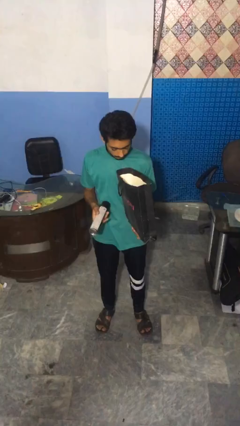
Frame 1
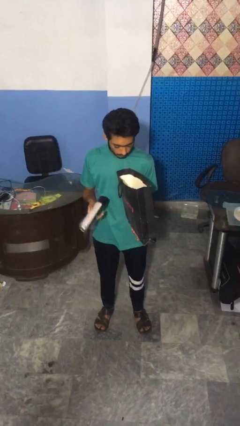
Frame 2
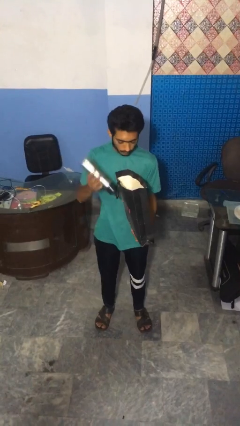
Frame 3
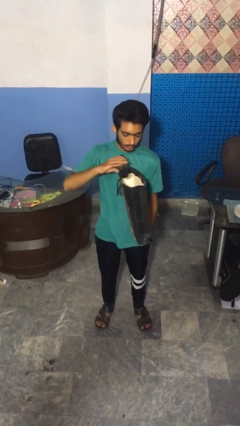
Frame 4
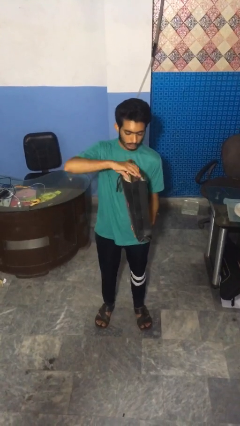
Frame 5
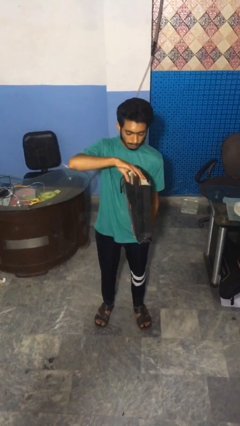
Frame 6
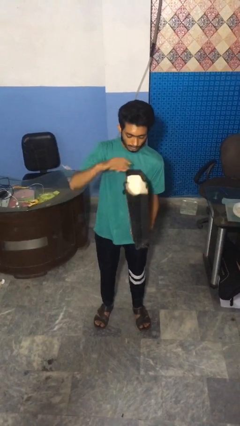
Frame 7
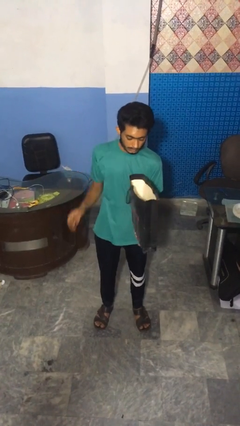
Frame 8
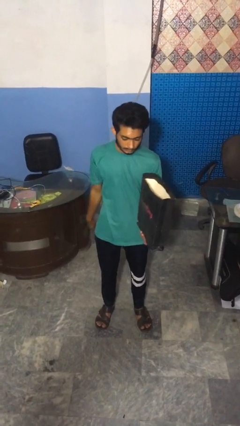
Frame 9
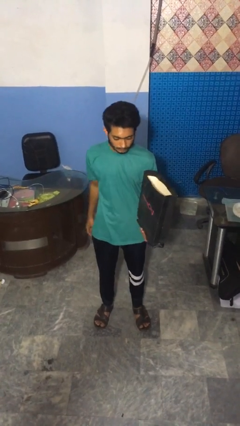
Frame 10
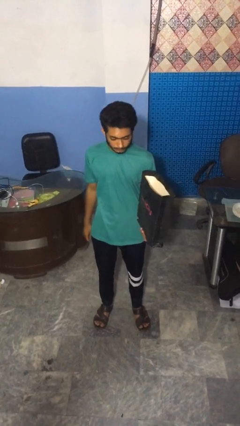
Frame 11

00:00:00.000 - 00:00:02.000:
person puts object into bag

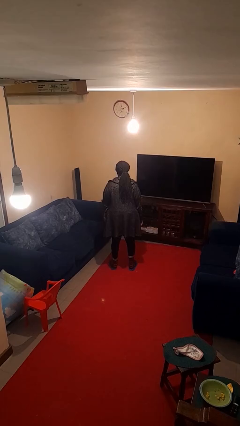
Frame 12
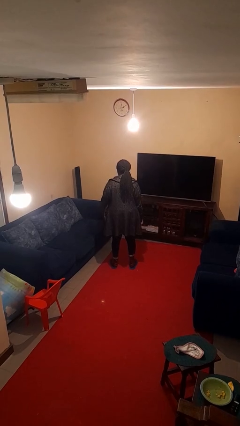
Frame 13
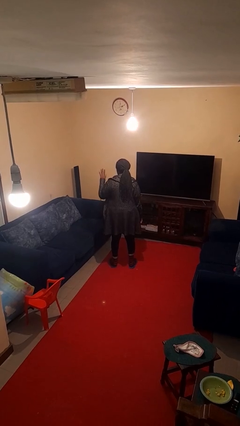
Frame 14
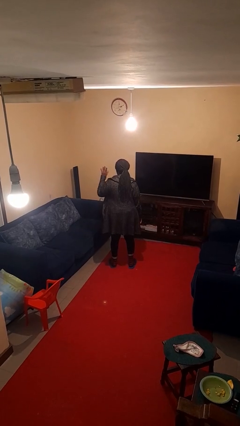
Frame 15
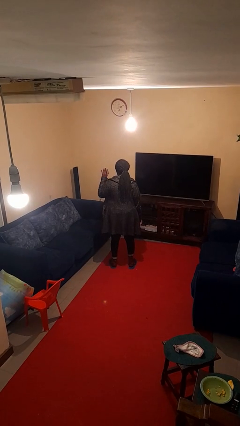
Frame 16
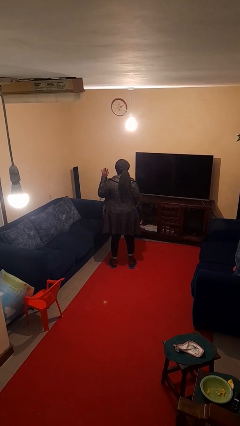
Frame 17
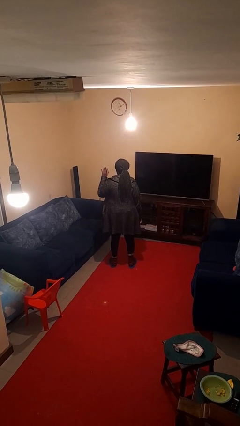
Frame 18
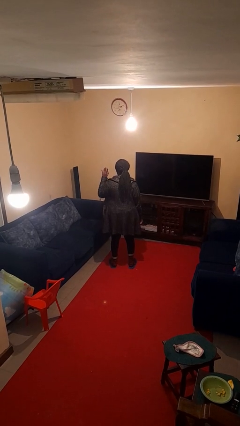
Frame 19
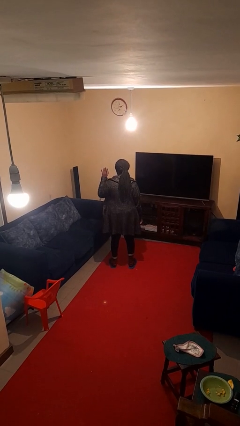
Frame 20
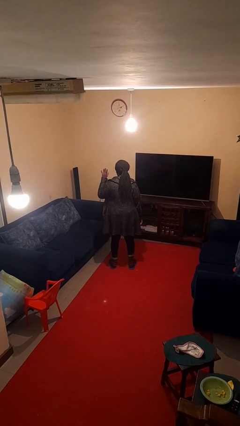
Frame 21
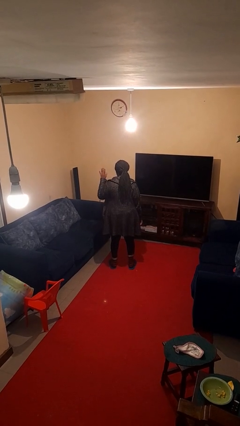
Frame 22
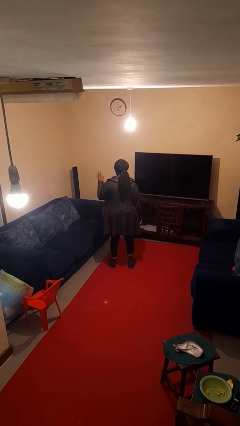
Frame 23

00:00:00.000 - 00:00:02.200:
person gestures number five

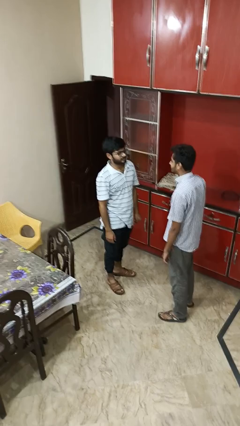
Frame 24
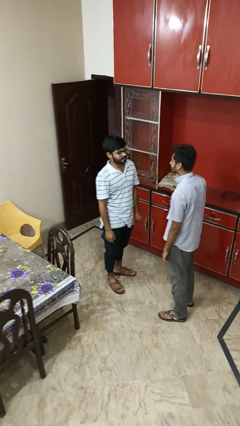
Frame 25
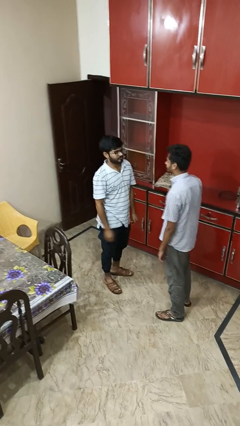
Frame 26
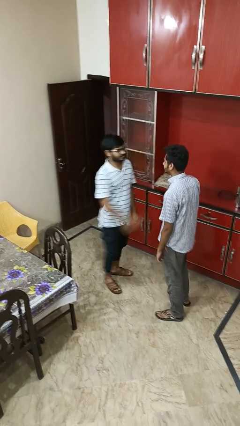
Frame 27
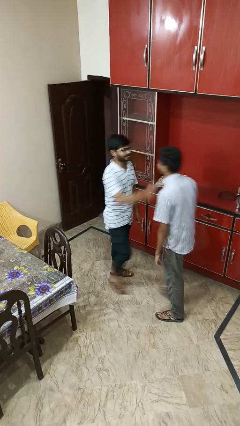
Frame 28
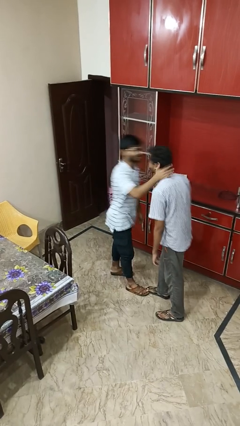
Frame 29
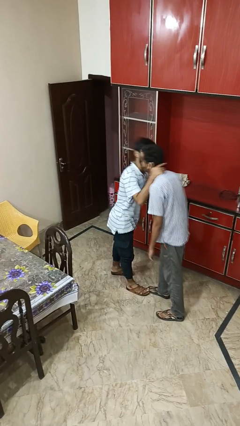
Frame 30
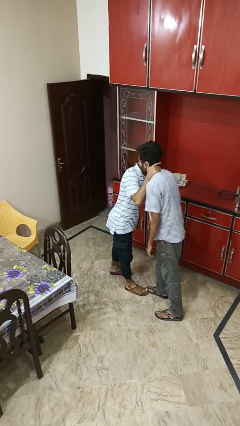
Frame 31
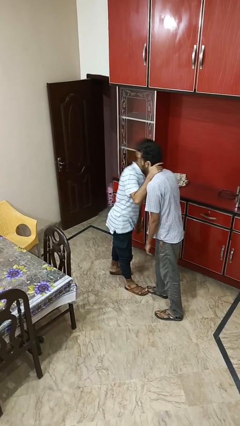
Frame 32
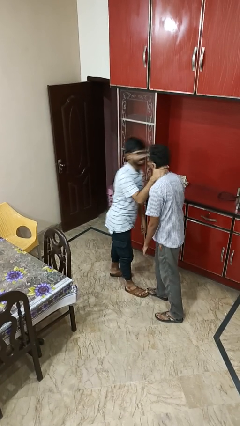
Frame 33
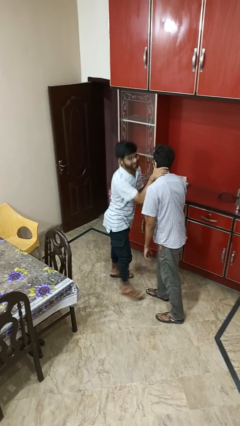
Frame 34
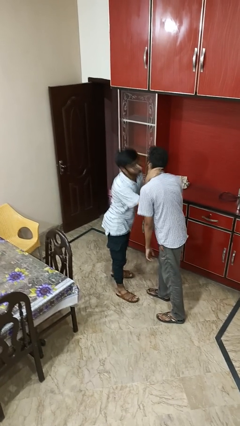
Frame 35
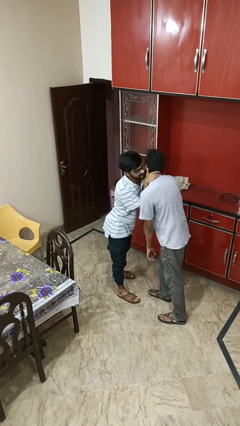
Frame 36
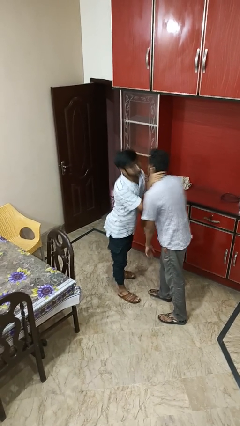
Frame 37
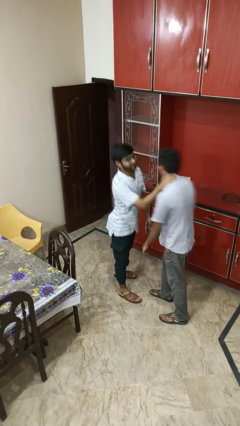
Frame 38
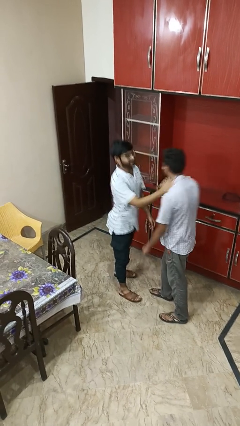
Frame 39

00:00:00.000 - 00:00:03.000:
person kisses cheek of person

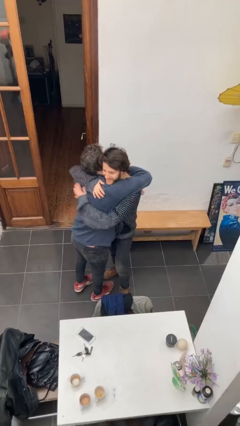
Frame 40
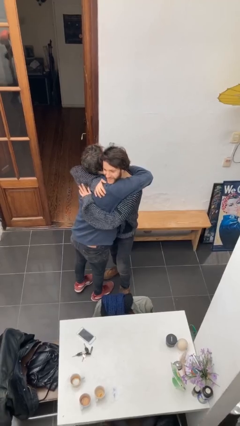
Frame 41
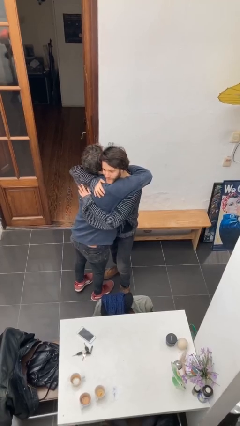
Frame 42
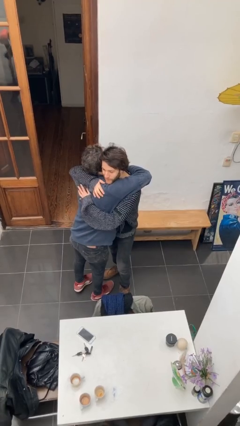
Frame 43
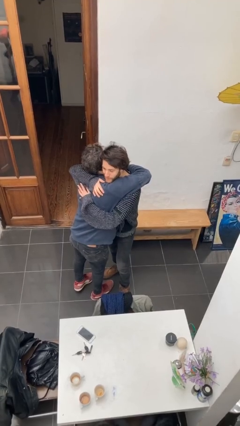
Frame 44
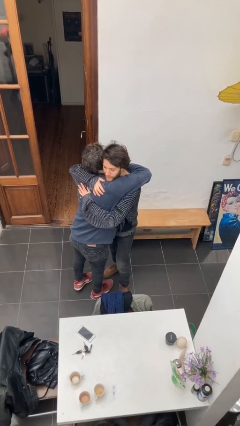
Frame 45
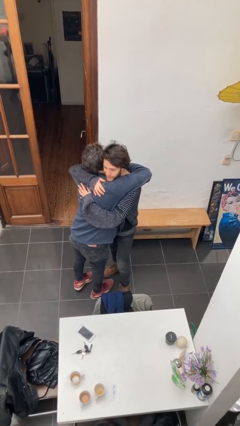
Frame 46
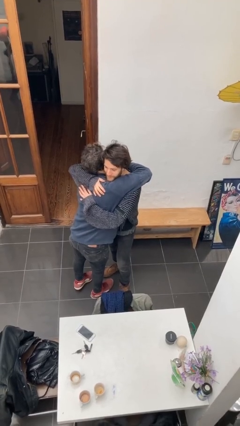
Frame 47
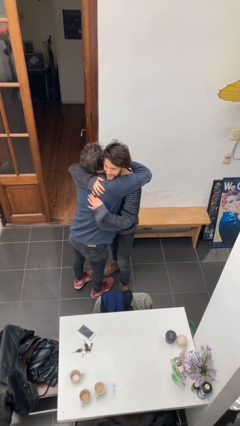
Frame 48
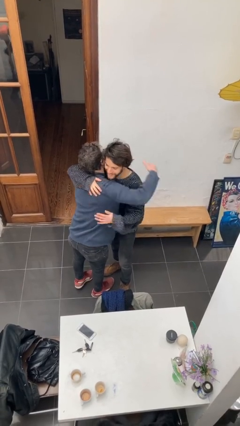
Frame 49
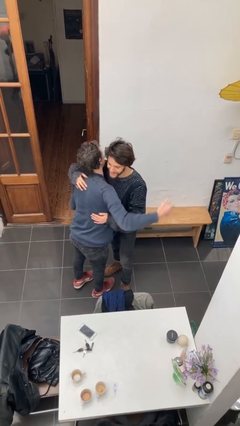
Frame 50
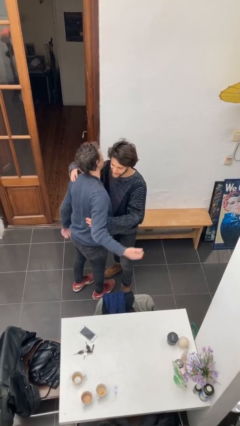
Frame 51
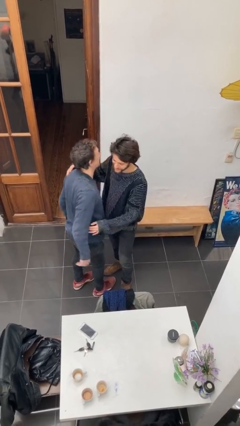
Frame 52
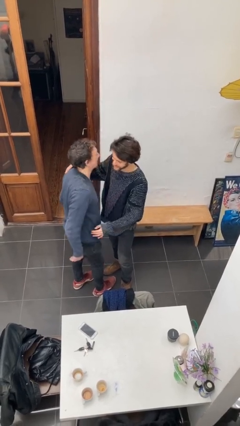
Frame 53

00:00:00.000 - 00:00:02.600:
person embraces person

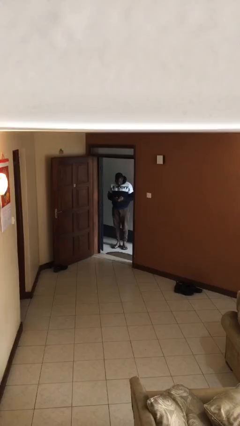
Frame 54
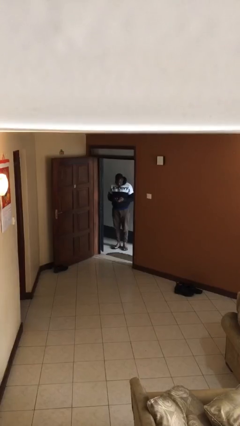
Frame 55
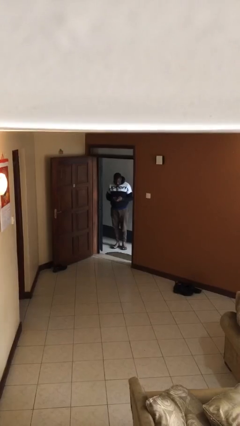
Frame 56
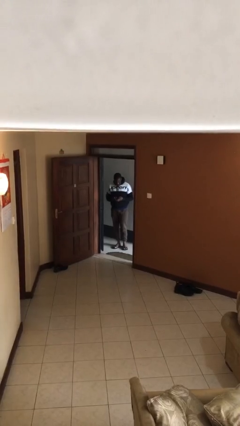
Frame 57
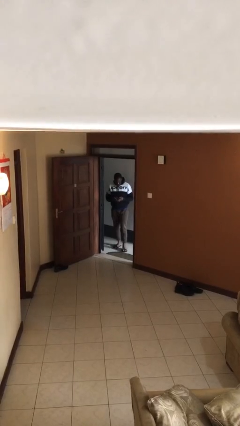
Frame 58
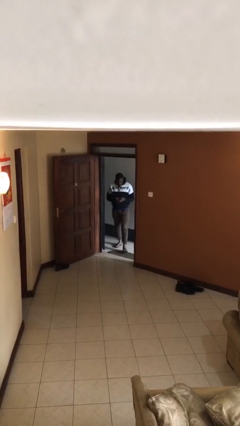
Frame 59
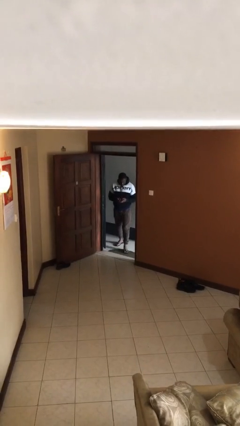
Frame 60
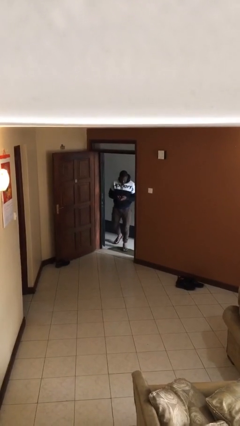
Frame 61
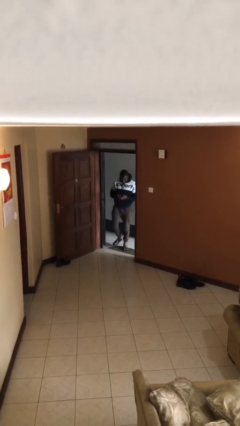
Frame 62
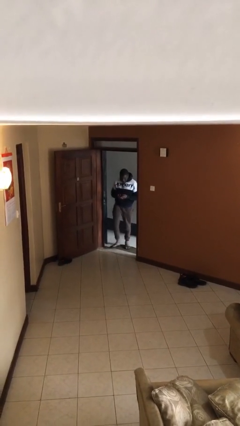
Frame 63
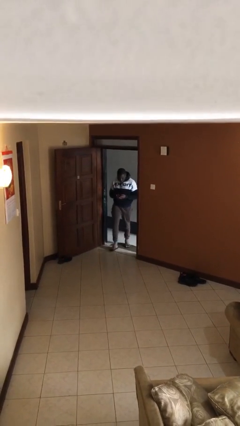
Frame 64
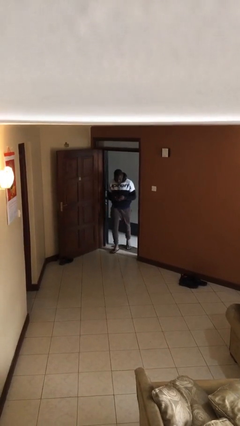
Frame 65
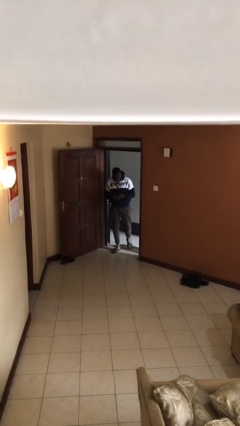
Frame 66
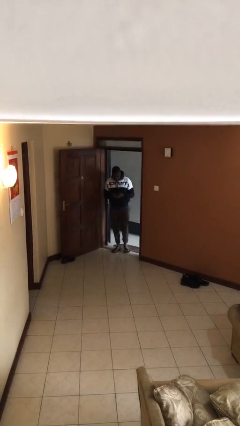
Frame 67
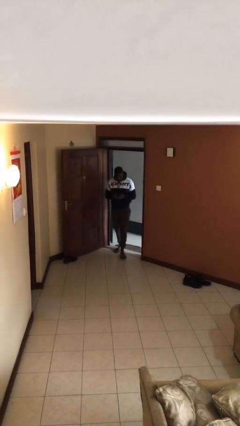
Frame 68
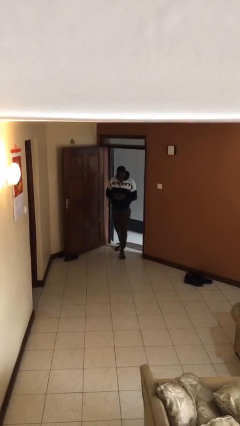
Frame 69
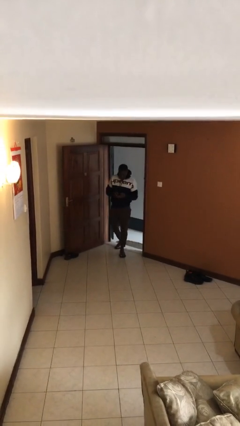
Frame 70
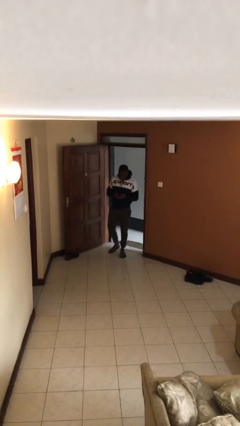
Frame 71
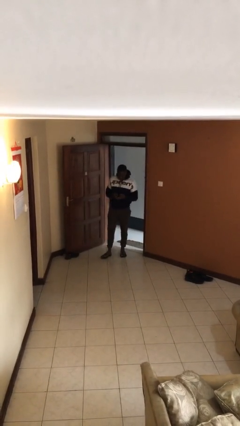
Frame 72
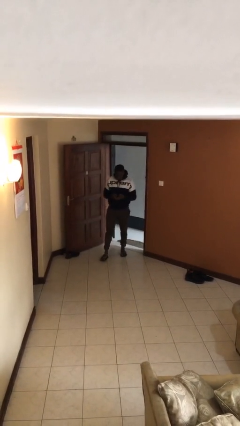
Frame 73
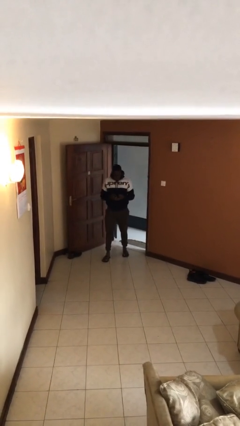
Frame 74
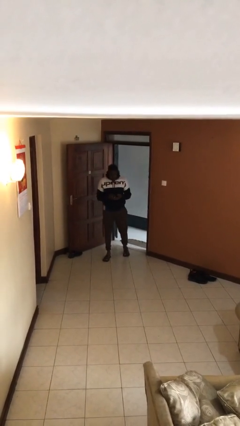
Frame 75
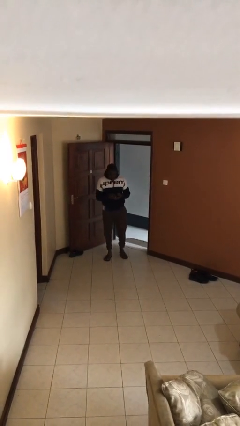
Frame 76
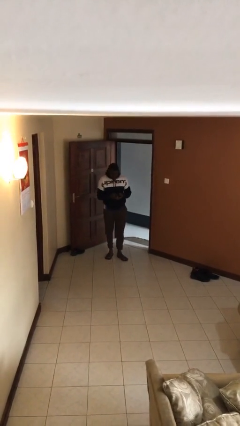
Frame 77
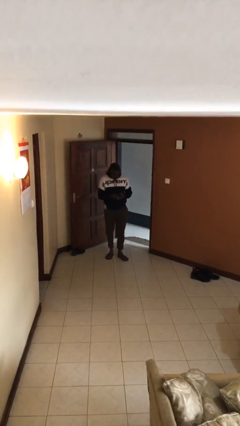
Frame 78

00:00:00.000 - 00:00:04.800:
person enters scene through structure

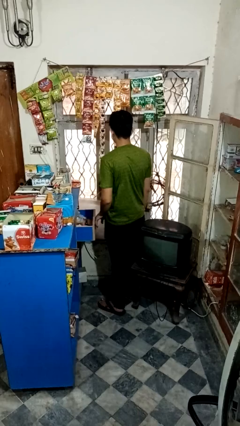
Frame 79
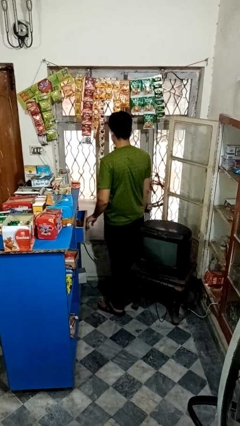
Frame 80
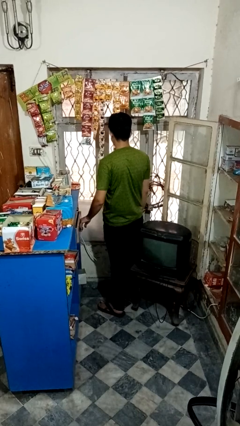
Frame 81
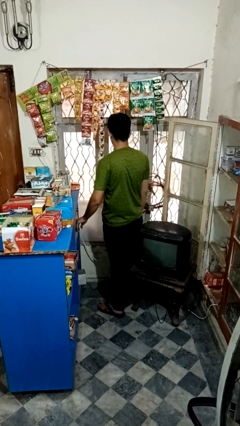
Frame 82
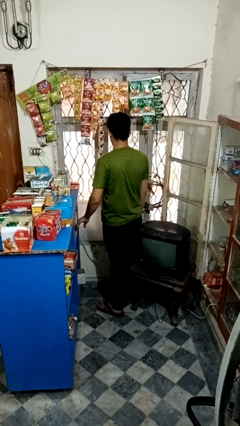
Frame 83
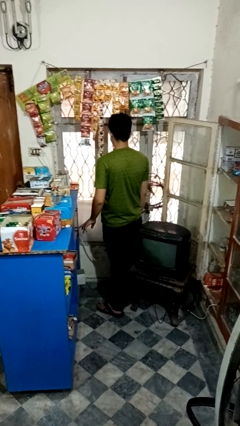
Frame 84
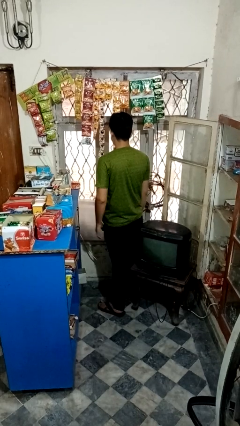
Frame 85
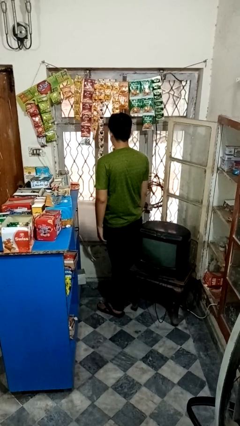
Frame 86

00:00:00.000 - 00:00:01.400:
person closes kitchen drawer

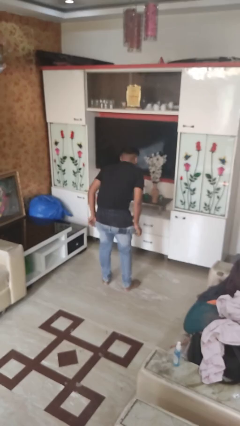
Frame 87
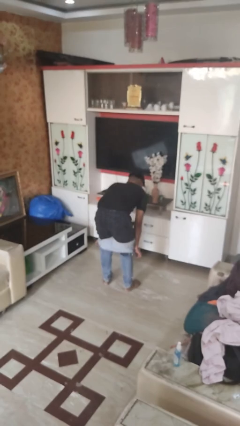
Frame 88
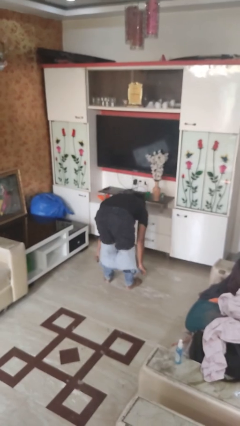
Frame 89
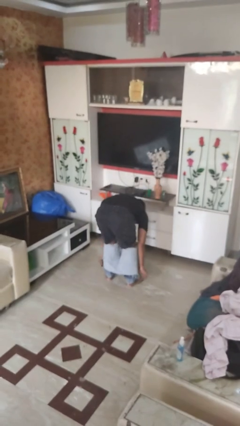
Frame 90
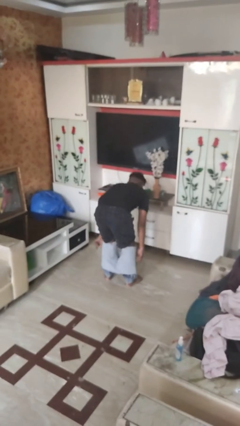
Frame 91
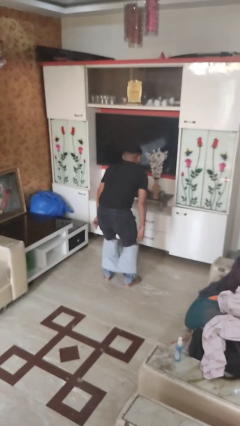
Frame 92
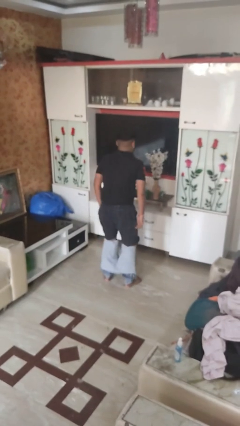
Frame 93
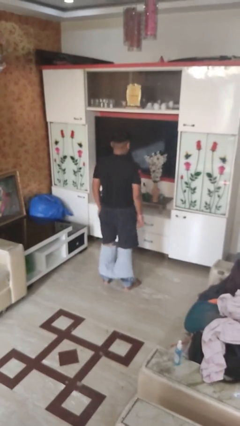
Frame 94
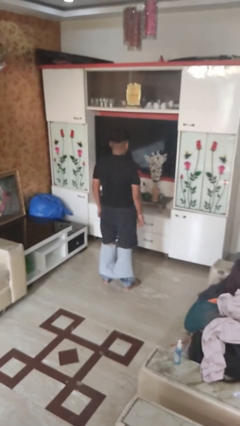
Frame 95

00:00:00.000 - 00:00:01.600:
person takes off pants
